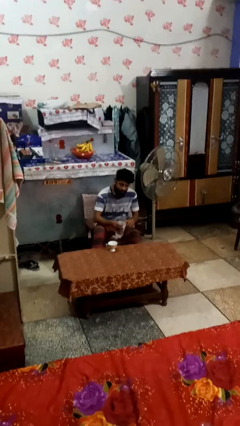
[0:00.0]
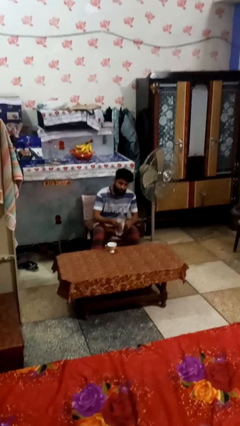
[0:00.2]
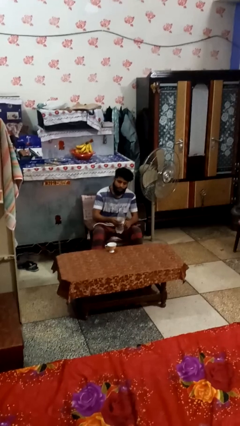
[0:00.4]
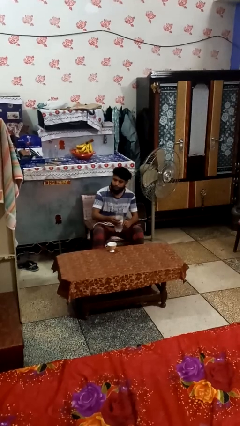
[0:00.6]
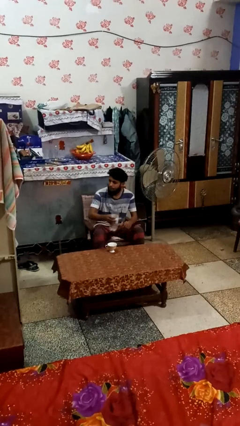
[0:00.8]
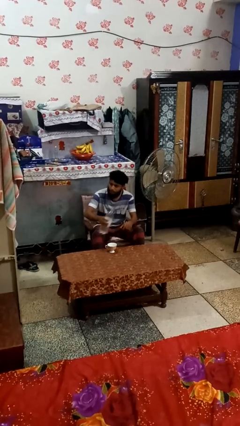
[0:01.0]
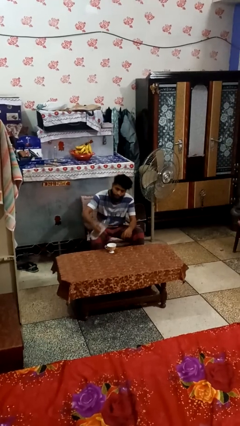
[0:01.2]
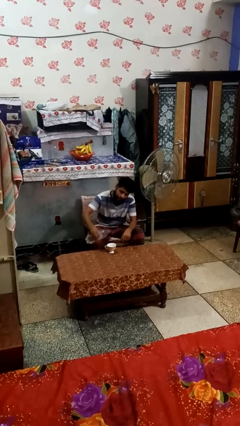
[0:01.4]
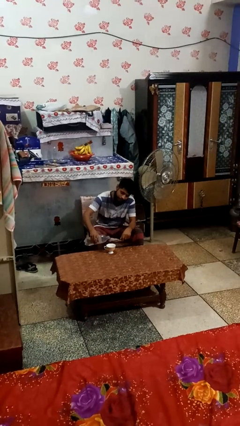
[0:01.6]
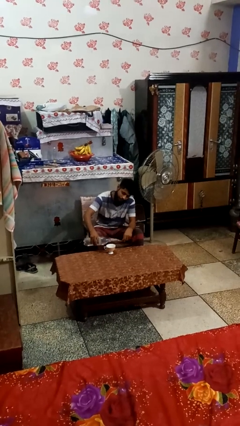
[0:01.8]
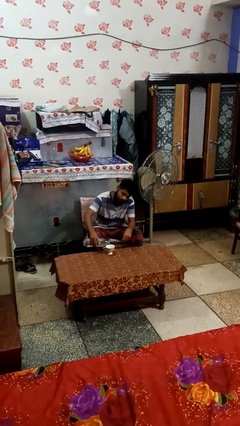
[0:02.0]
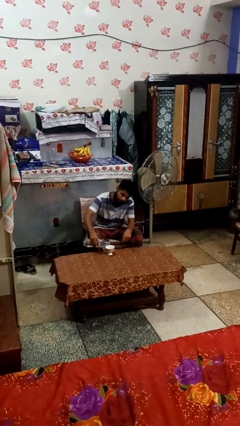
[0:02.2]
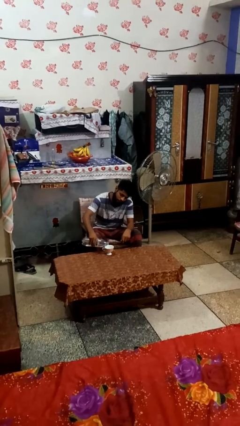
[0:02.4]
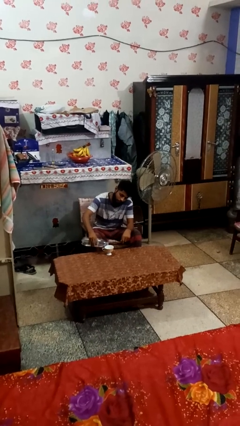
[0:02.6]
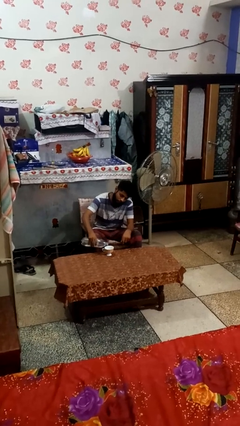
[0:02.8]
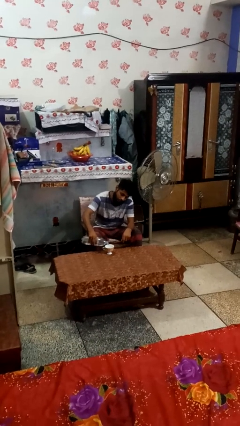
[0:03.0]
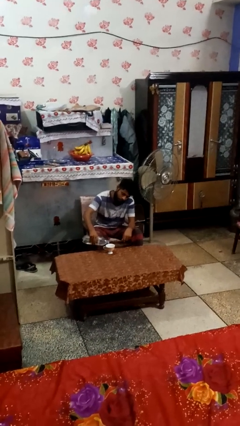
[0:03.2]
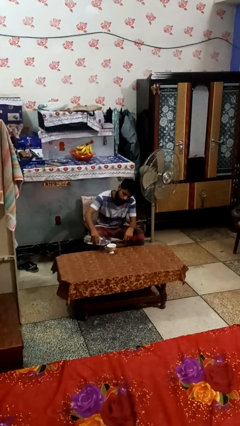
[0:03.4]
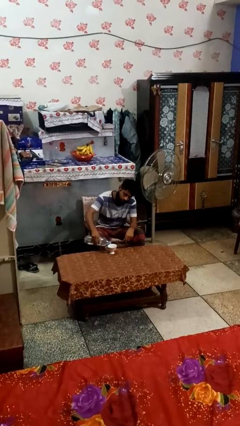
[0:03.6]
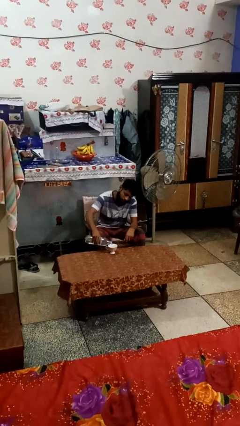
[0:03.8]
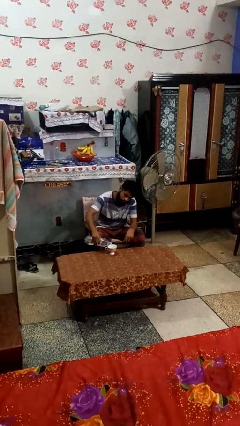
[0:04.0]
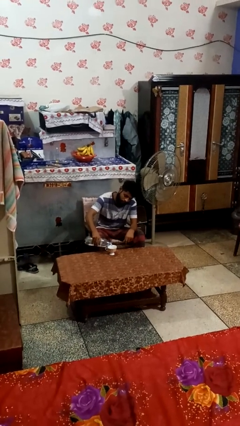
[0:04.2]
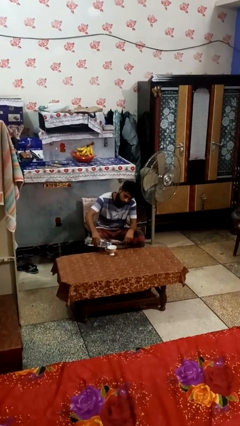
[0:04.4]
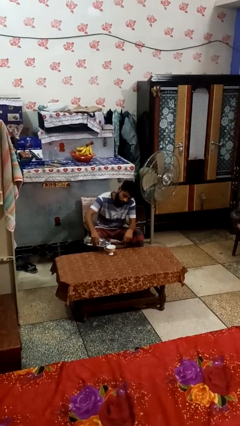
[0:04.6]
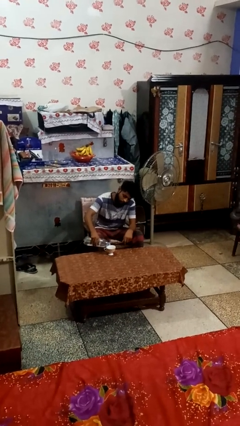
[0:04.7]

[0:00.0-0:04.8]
person pours liquid into cup

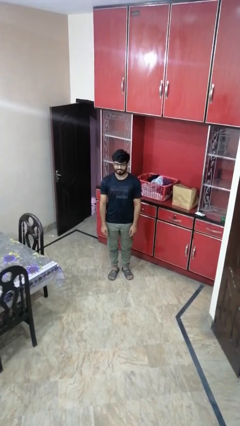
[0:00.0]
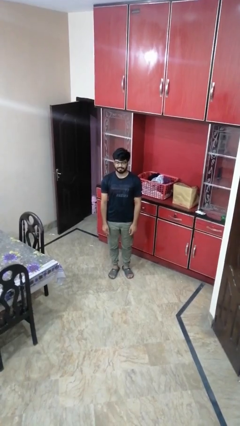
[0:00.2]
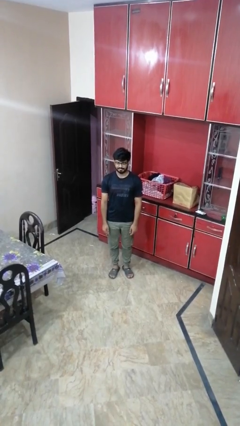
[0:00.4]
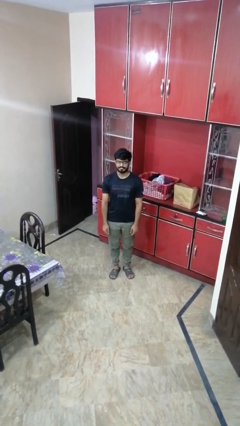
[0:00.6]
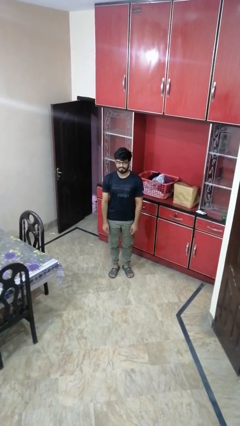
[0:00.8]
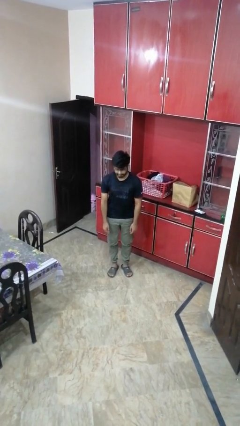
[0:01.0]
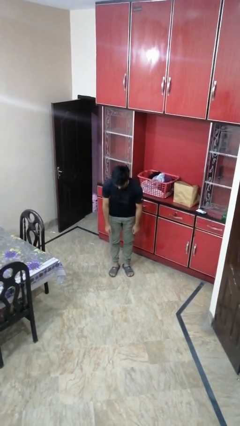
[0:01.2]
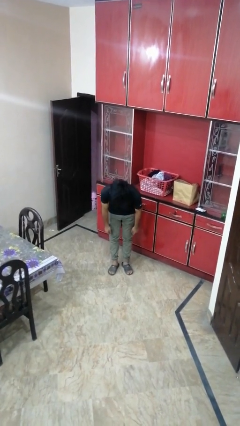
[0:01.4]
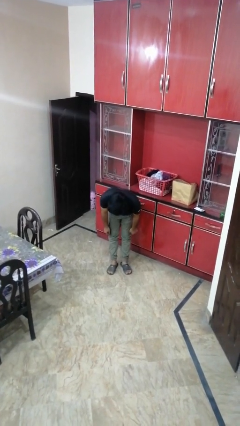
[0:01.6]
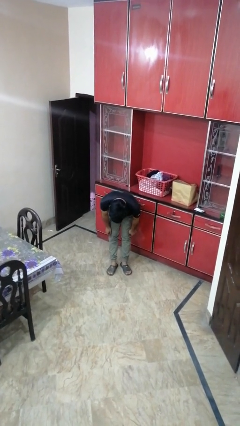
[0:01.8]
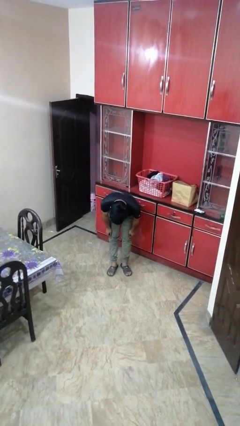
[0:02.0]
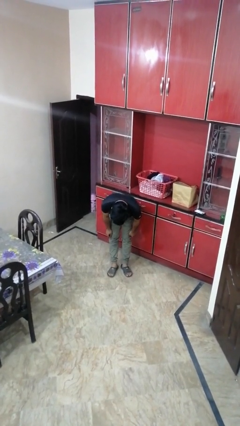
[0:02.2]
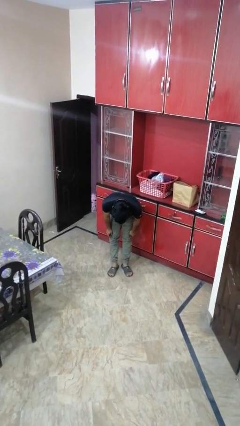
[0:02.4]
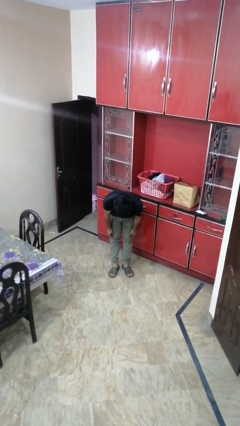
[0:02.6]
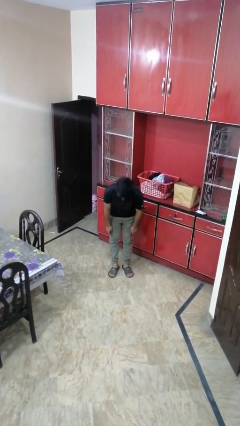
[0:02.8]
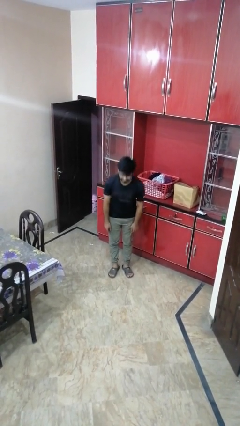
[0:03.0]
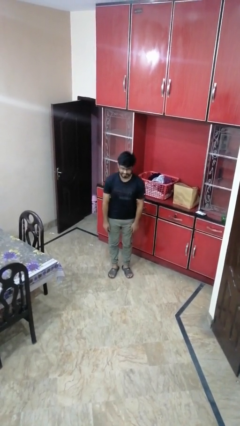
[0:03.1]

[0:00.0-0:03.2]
person bows

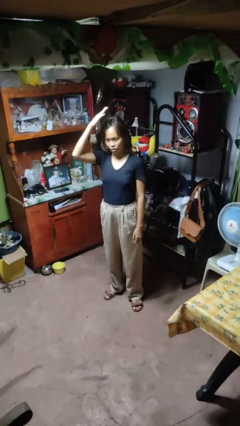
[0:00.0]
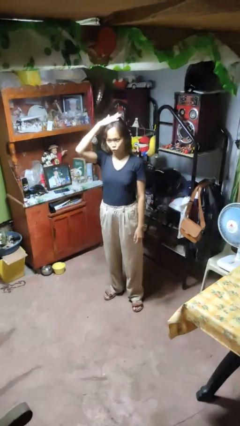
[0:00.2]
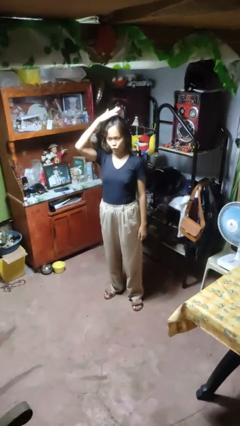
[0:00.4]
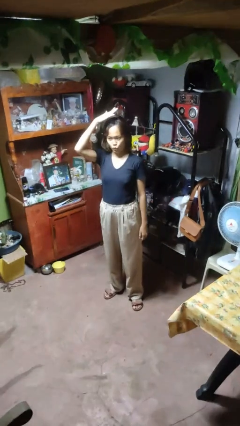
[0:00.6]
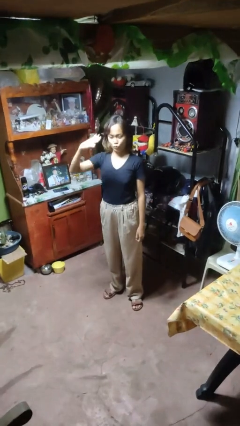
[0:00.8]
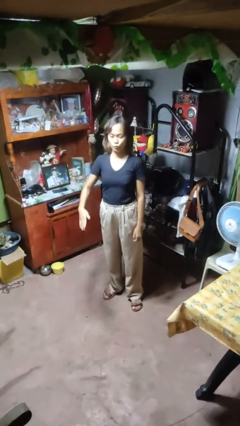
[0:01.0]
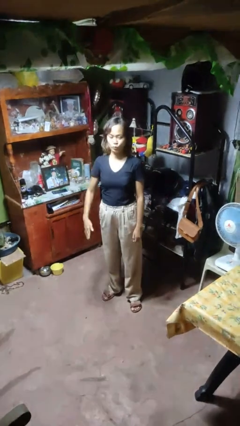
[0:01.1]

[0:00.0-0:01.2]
person pats head

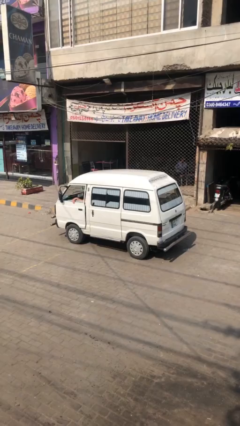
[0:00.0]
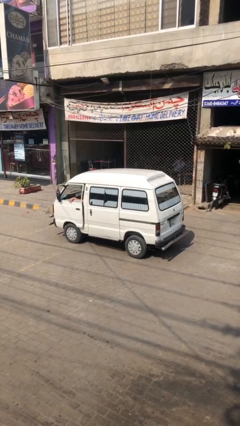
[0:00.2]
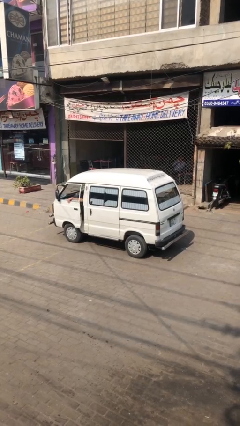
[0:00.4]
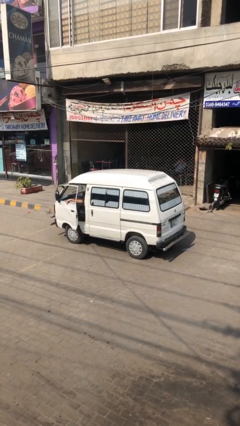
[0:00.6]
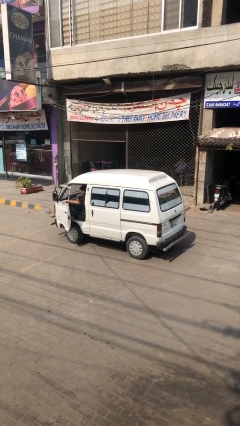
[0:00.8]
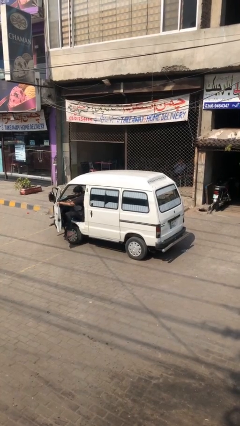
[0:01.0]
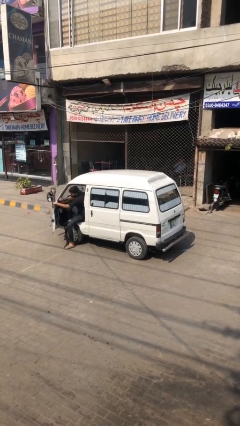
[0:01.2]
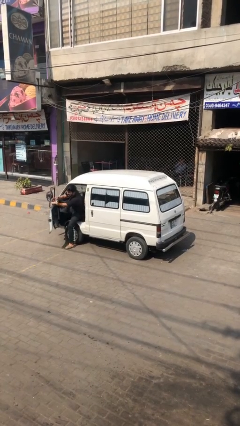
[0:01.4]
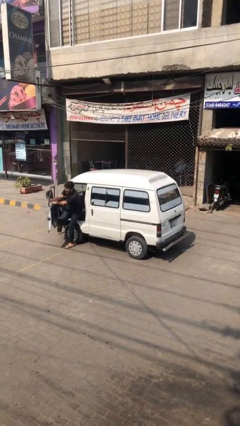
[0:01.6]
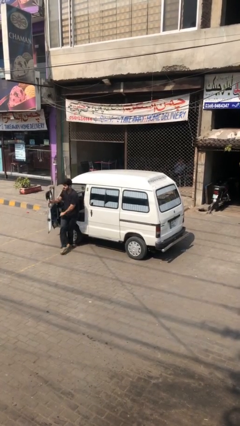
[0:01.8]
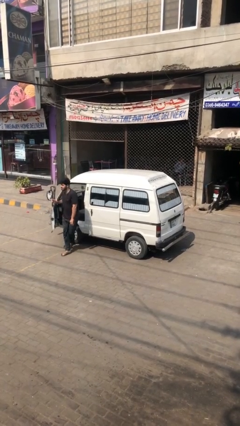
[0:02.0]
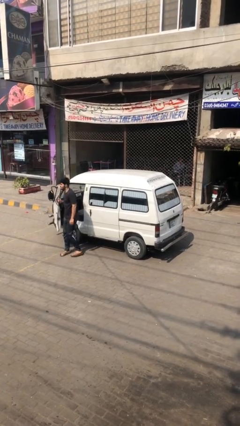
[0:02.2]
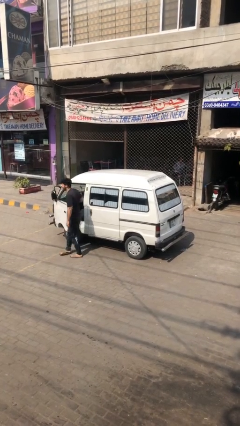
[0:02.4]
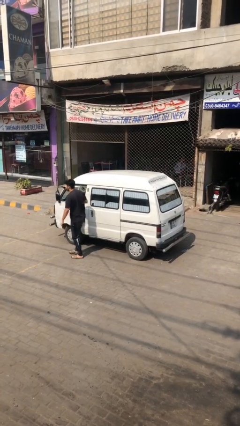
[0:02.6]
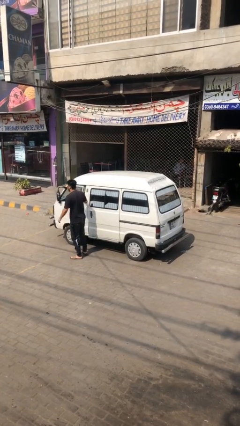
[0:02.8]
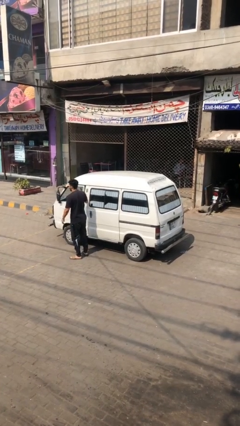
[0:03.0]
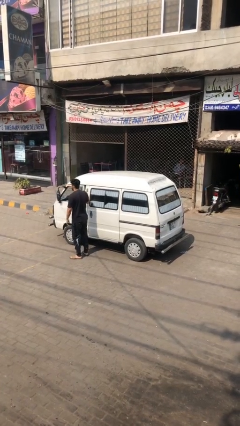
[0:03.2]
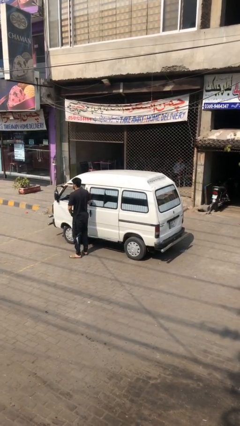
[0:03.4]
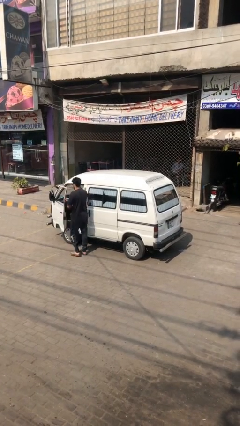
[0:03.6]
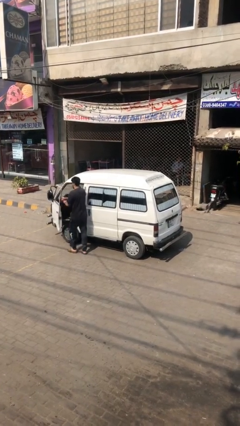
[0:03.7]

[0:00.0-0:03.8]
car drops off person

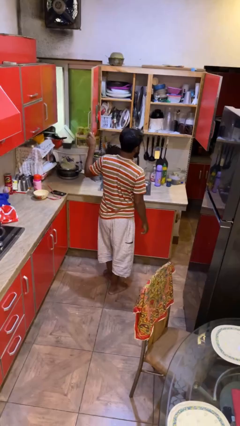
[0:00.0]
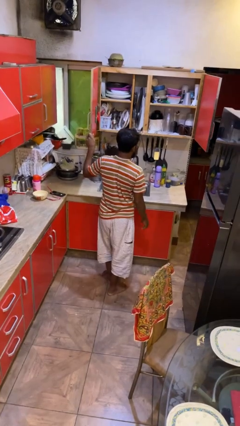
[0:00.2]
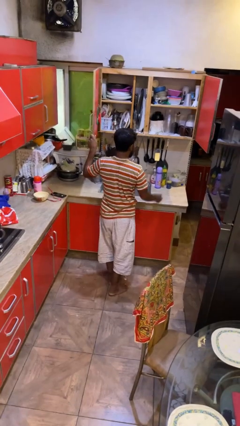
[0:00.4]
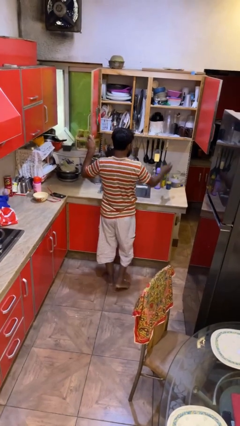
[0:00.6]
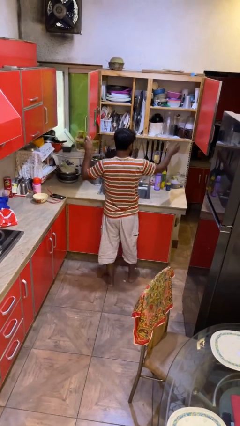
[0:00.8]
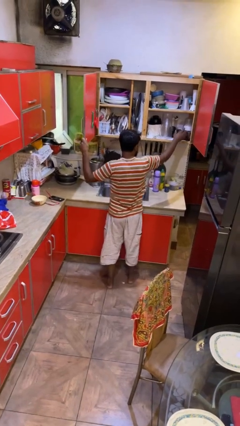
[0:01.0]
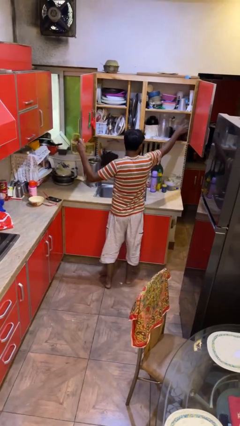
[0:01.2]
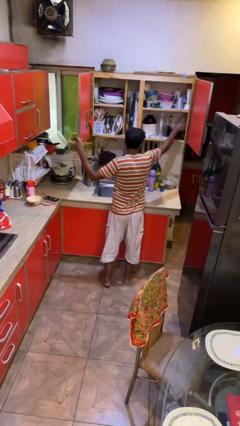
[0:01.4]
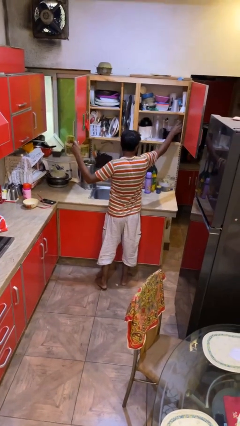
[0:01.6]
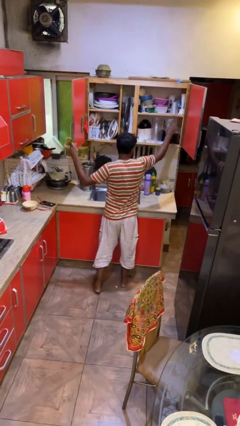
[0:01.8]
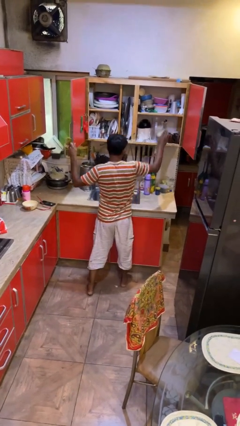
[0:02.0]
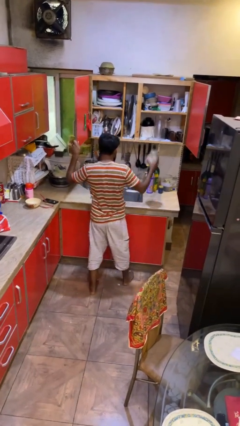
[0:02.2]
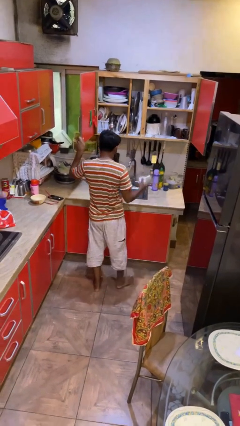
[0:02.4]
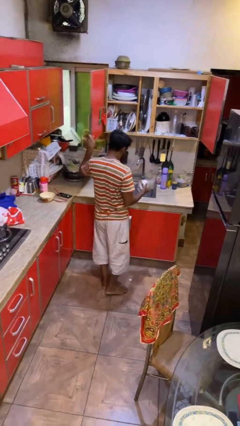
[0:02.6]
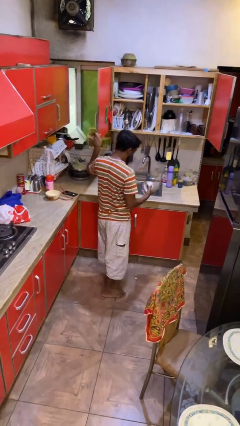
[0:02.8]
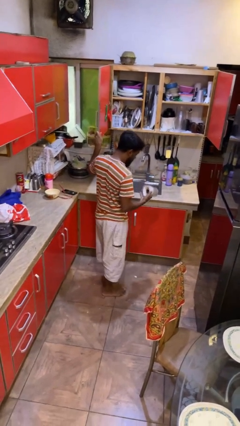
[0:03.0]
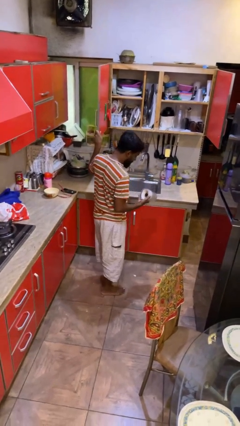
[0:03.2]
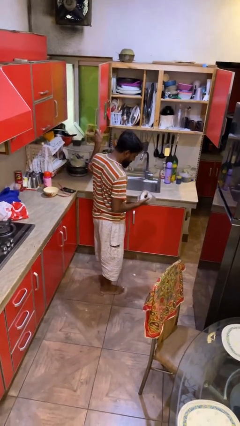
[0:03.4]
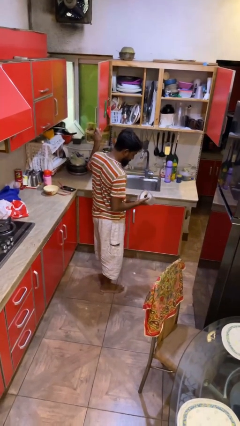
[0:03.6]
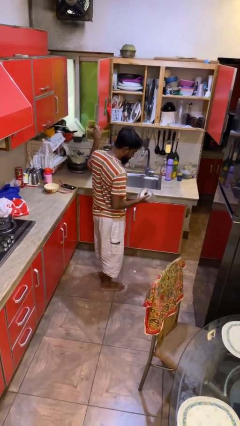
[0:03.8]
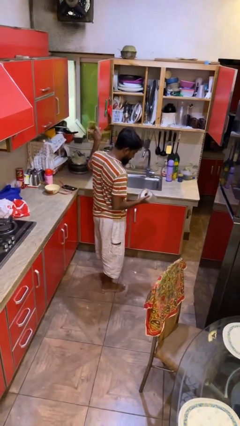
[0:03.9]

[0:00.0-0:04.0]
person picks up object from cabinet

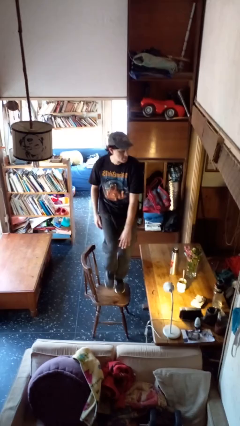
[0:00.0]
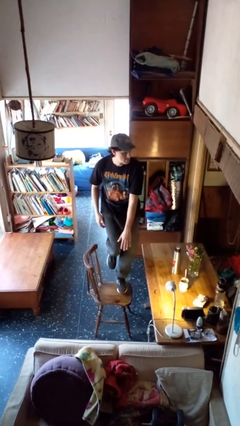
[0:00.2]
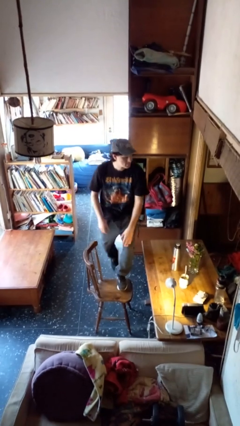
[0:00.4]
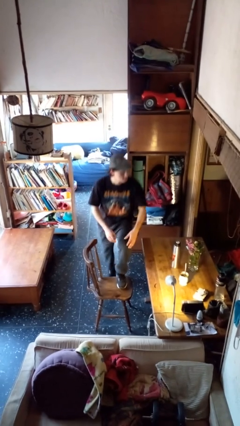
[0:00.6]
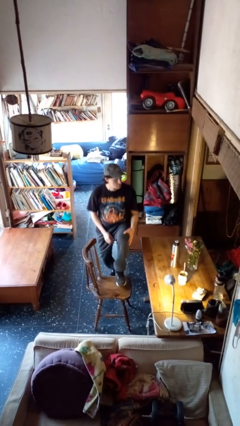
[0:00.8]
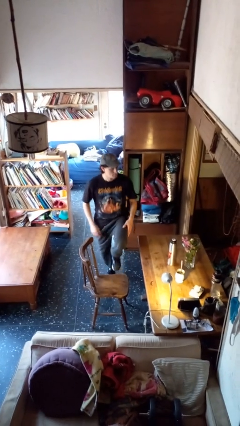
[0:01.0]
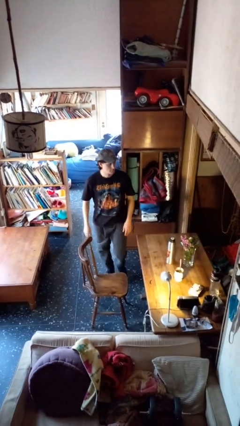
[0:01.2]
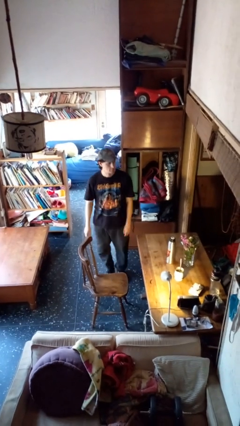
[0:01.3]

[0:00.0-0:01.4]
person climbs off chair
